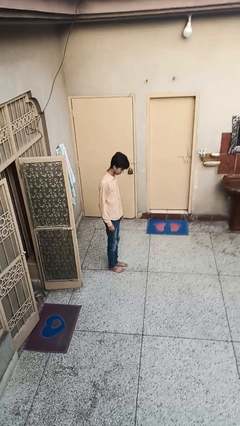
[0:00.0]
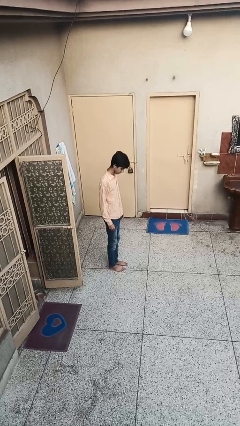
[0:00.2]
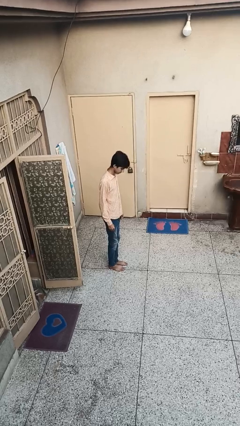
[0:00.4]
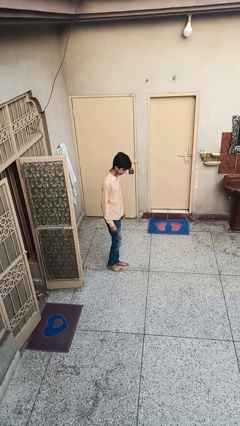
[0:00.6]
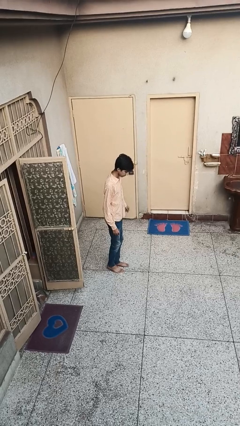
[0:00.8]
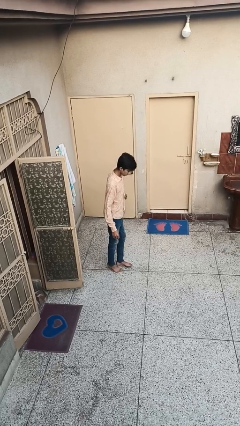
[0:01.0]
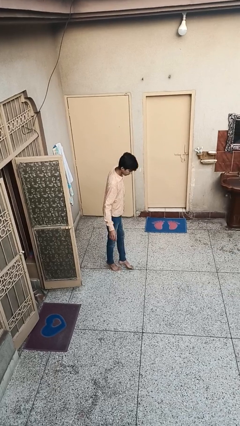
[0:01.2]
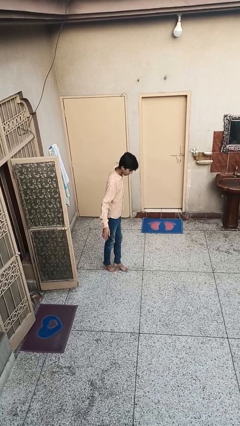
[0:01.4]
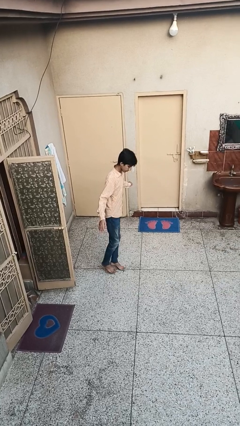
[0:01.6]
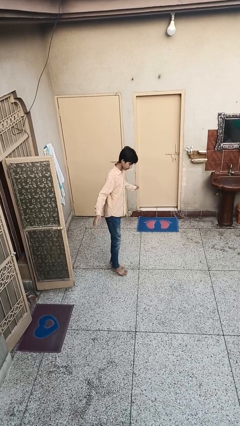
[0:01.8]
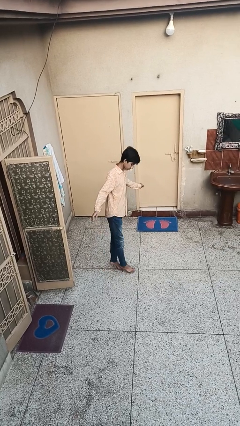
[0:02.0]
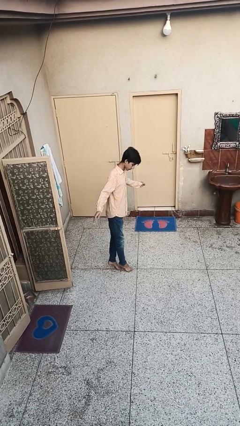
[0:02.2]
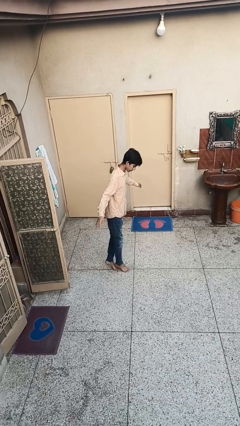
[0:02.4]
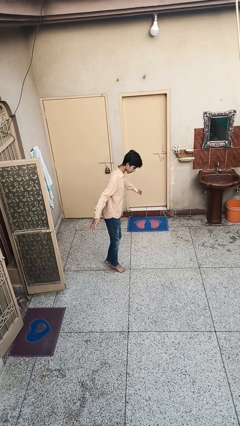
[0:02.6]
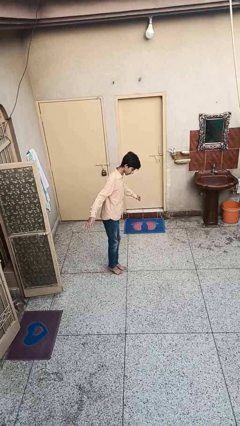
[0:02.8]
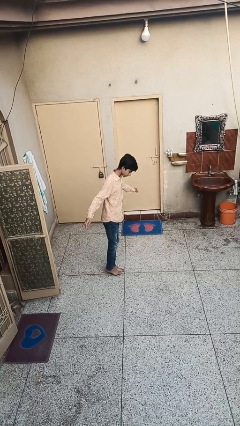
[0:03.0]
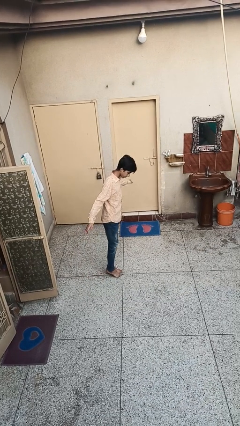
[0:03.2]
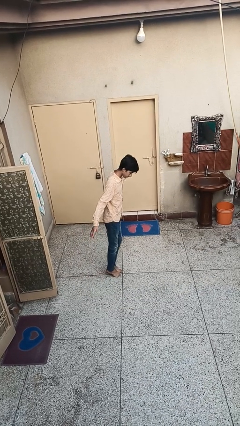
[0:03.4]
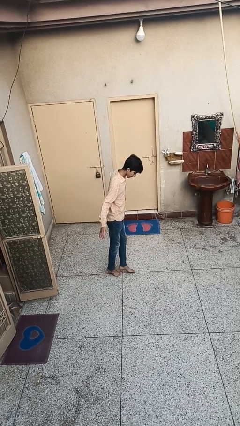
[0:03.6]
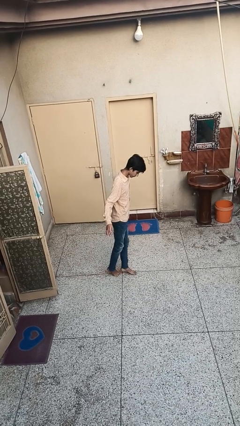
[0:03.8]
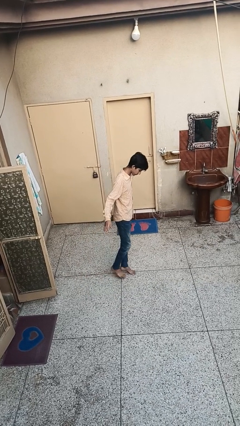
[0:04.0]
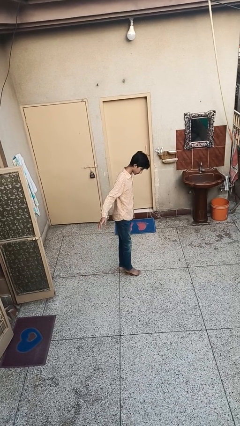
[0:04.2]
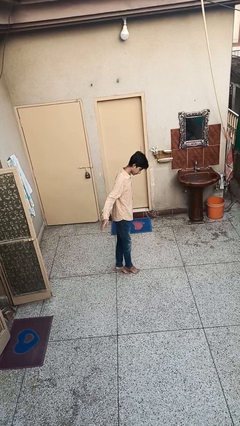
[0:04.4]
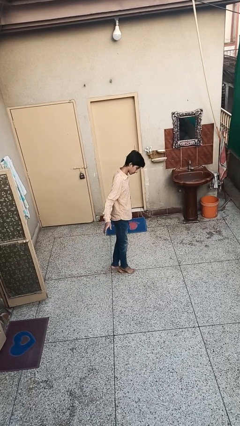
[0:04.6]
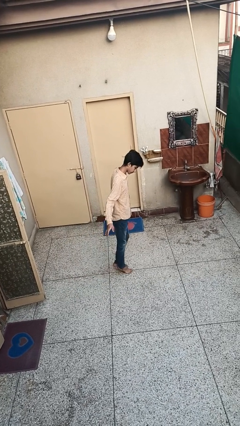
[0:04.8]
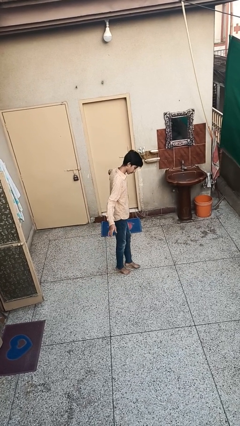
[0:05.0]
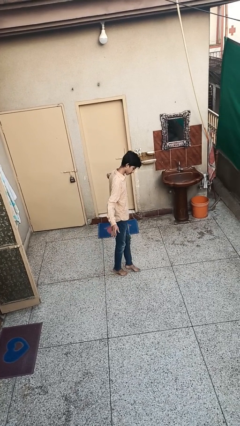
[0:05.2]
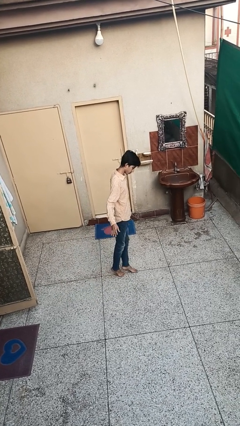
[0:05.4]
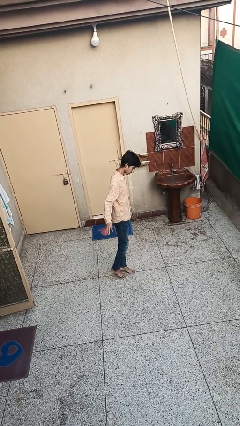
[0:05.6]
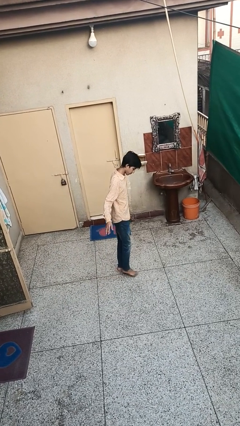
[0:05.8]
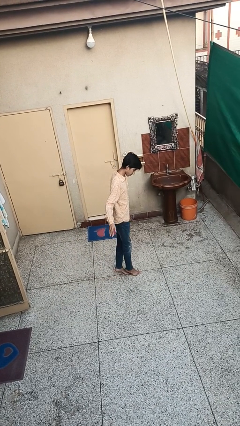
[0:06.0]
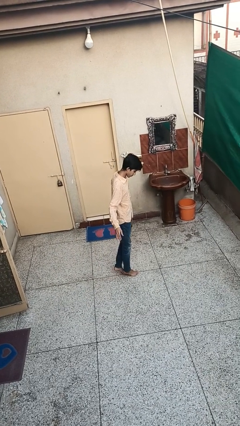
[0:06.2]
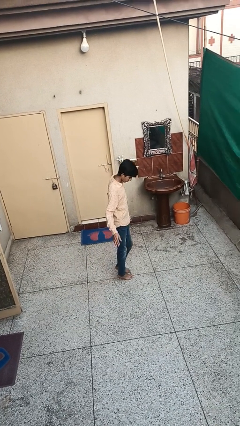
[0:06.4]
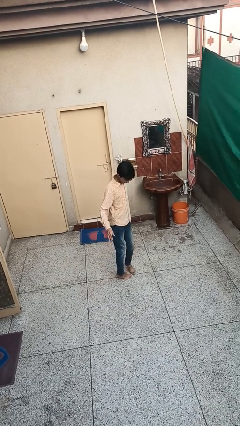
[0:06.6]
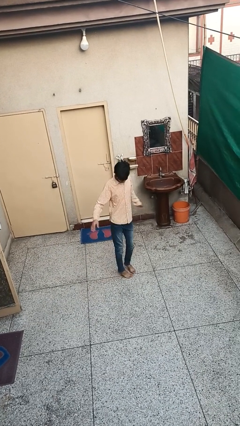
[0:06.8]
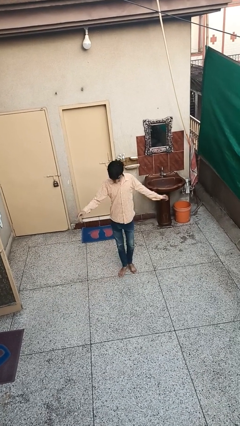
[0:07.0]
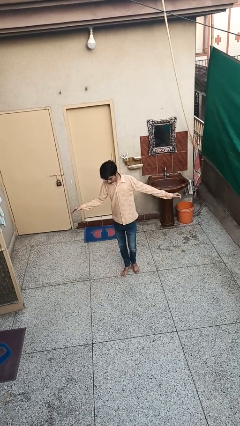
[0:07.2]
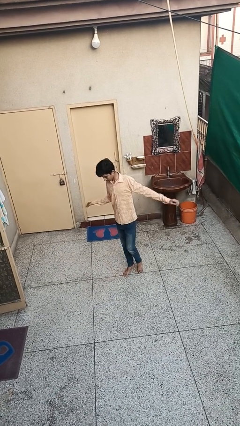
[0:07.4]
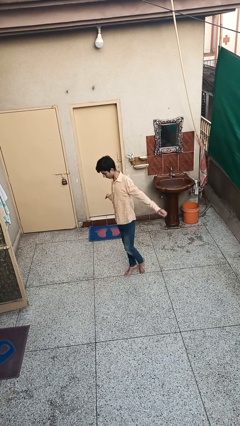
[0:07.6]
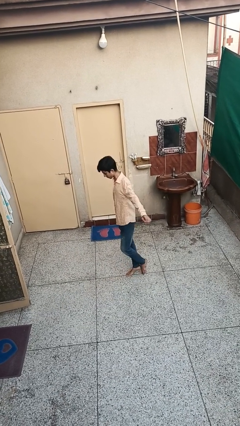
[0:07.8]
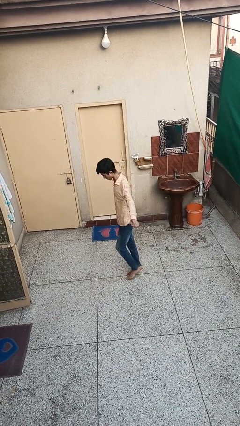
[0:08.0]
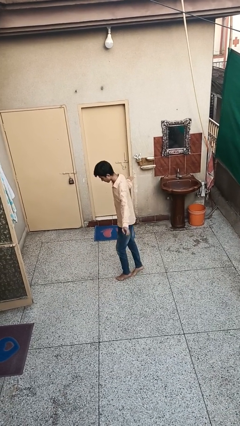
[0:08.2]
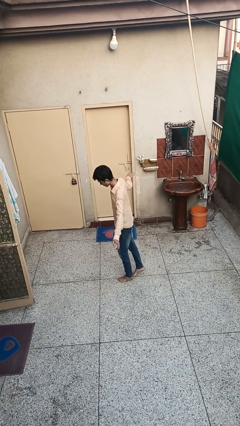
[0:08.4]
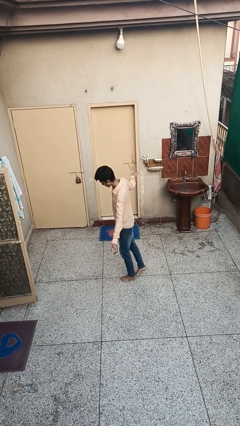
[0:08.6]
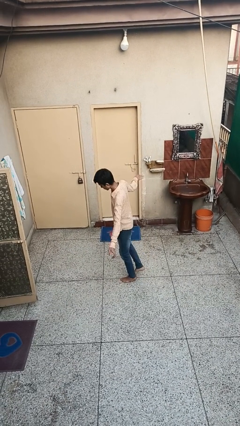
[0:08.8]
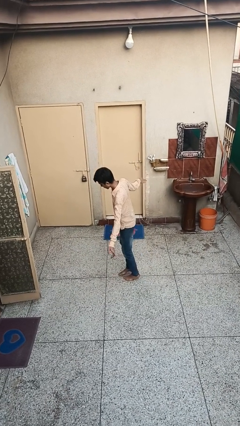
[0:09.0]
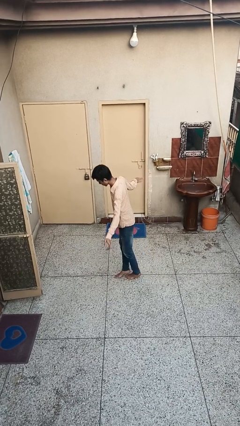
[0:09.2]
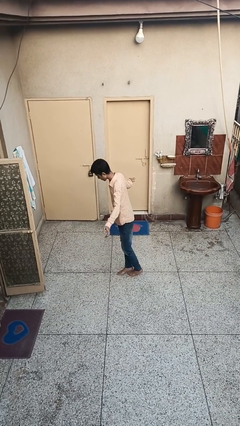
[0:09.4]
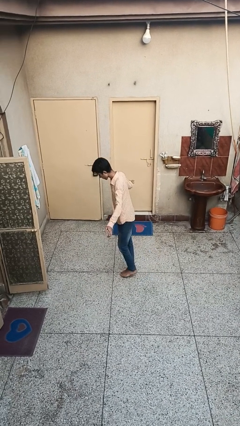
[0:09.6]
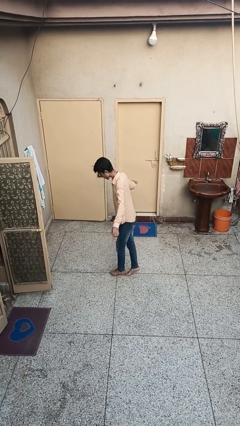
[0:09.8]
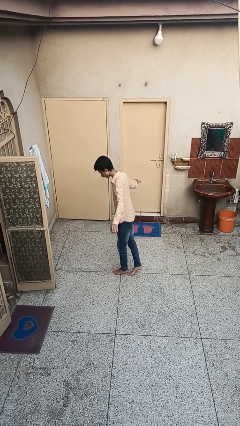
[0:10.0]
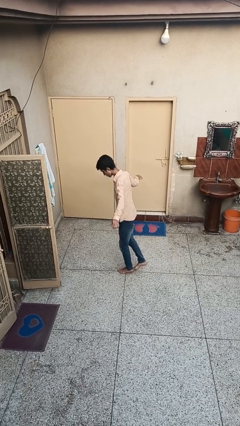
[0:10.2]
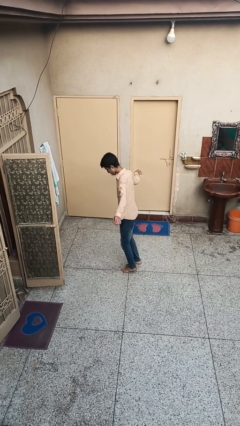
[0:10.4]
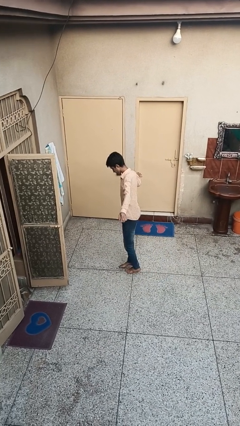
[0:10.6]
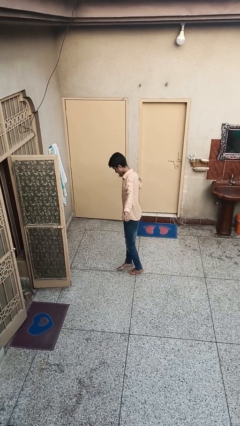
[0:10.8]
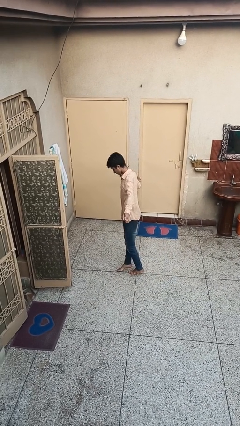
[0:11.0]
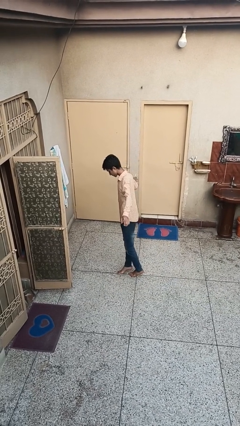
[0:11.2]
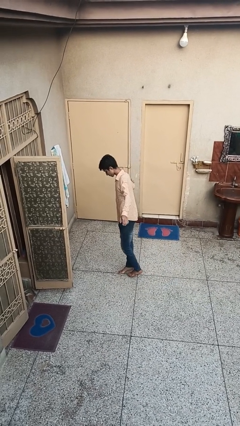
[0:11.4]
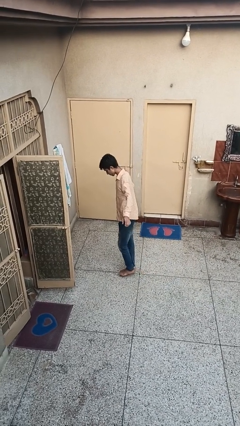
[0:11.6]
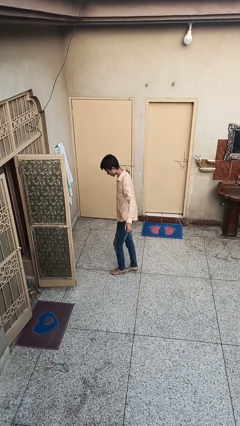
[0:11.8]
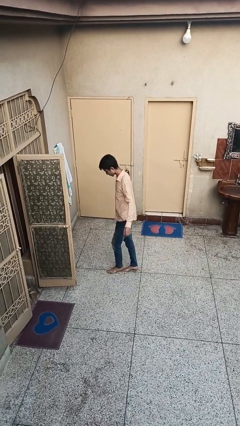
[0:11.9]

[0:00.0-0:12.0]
person walks tiptoe

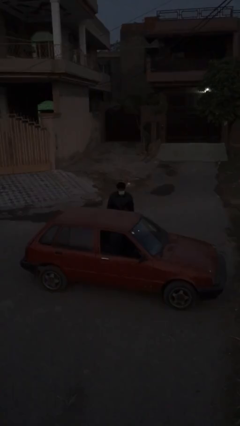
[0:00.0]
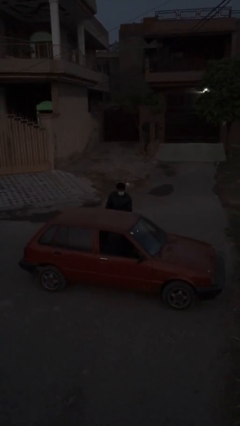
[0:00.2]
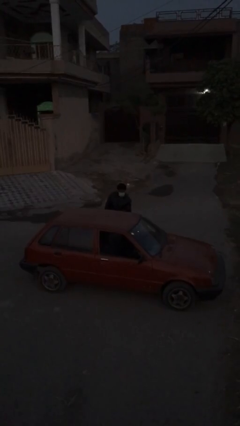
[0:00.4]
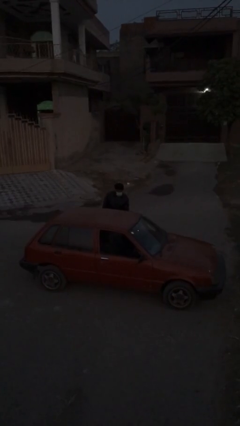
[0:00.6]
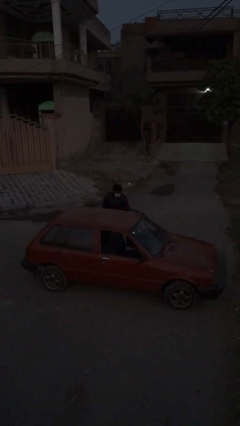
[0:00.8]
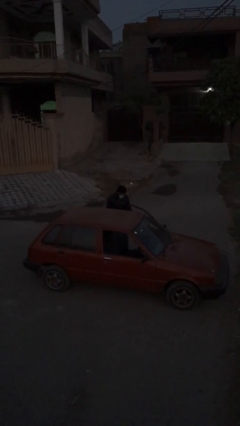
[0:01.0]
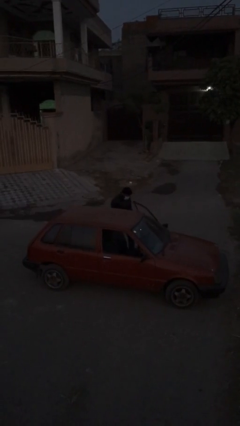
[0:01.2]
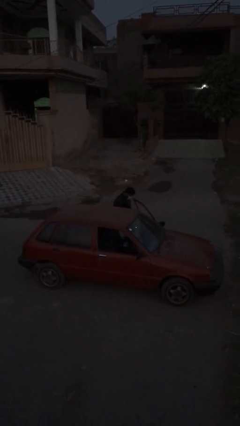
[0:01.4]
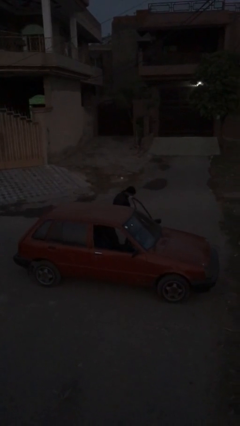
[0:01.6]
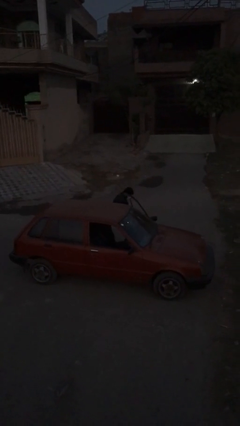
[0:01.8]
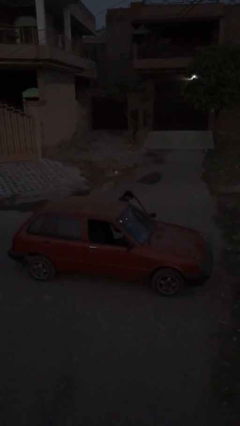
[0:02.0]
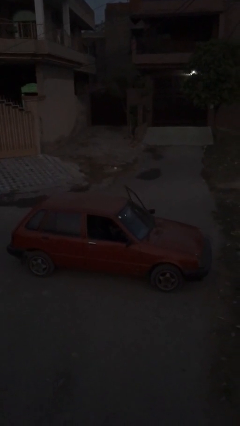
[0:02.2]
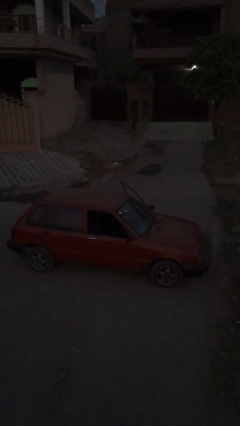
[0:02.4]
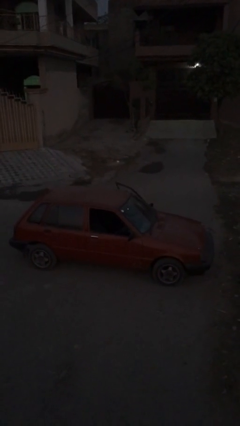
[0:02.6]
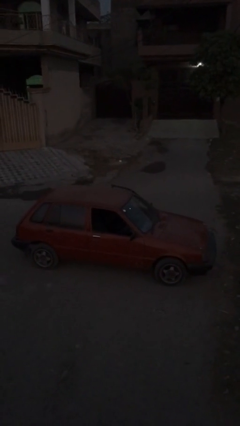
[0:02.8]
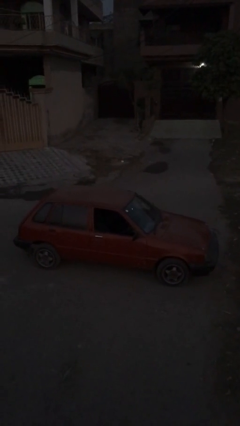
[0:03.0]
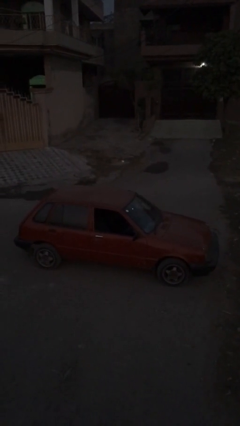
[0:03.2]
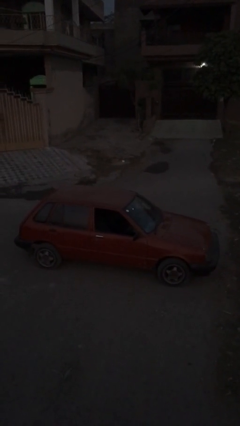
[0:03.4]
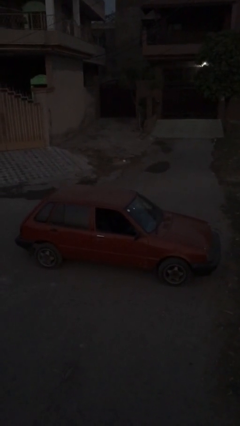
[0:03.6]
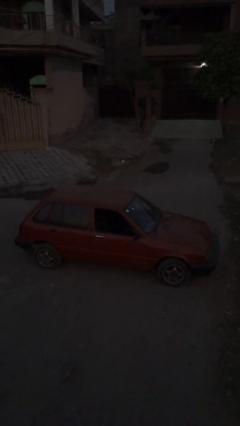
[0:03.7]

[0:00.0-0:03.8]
person enters car

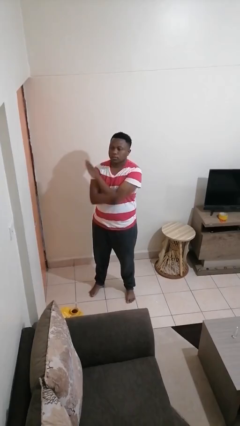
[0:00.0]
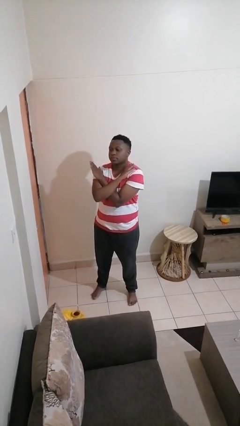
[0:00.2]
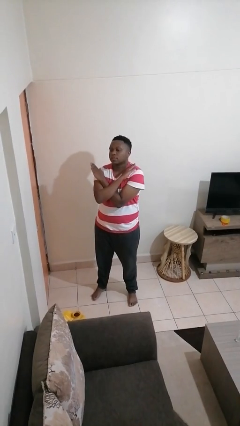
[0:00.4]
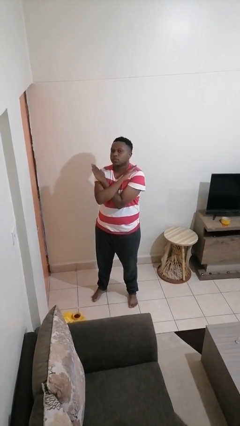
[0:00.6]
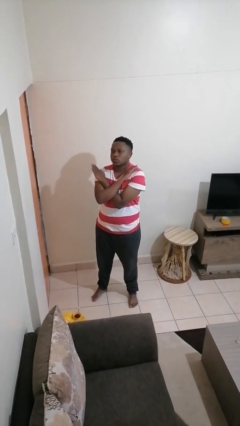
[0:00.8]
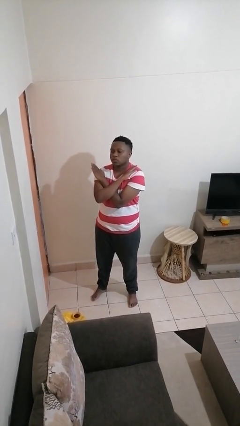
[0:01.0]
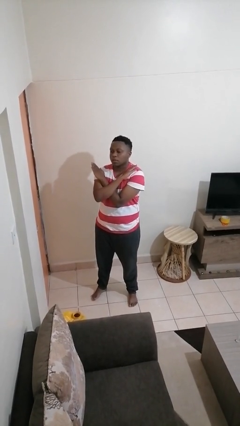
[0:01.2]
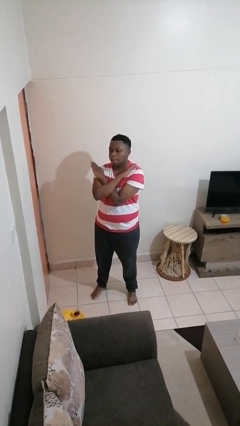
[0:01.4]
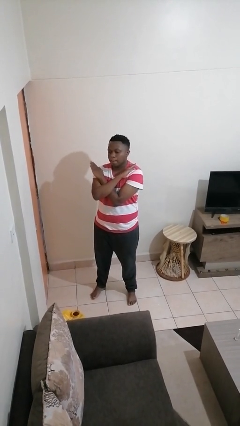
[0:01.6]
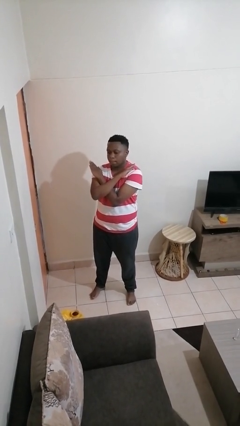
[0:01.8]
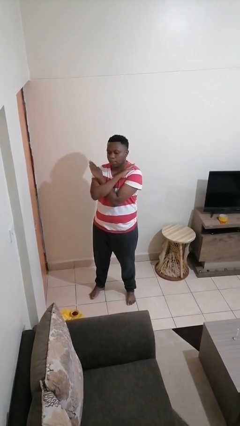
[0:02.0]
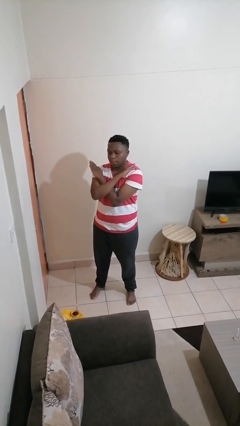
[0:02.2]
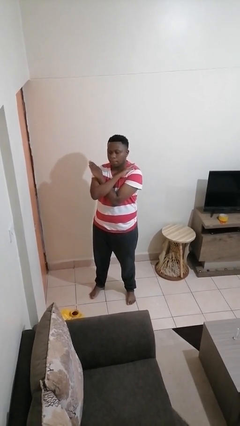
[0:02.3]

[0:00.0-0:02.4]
person gestures arms x
